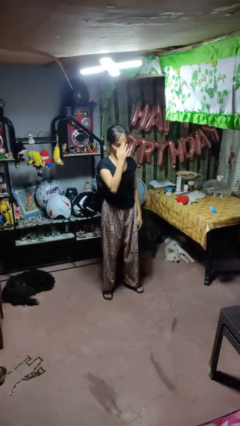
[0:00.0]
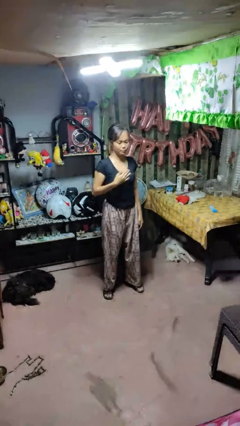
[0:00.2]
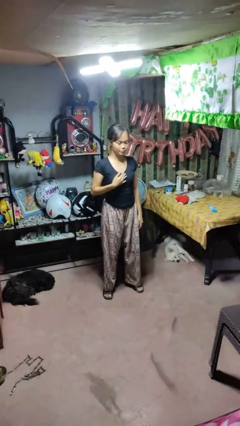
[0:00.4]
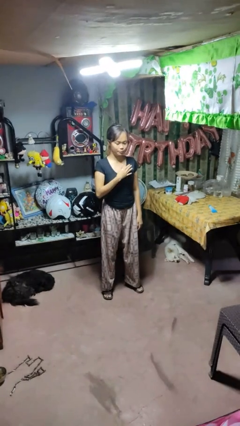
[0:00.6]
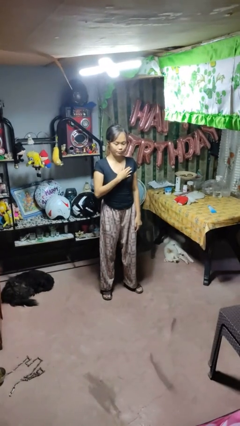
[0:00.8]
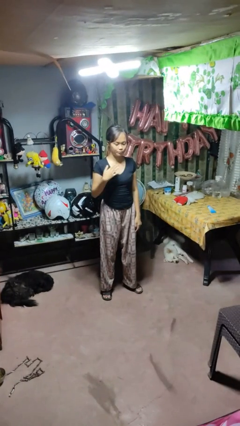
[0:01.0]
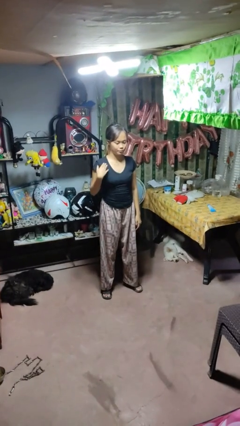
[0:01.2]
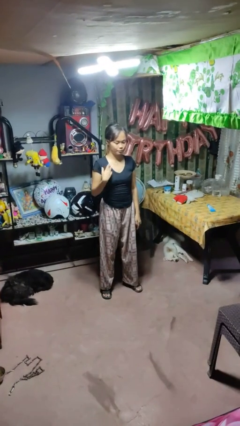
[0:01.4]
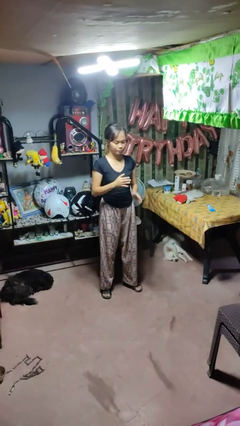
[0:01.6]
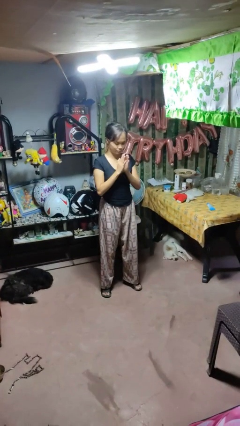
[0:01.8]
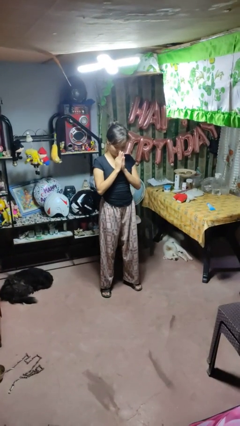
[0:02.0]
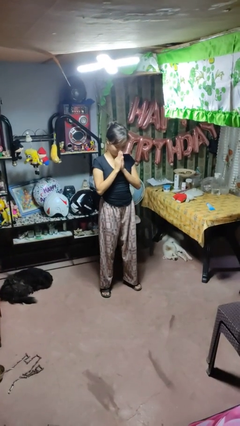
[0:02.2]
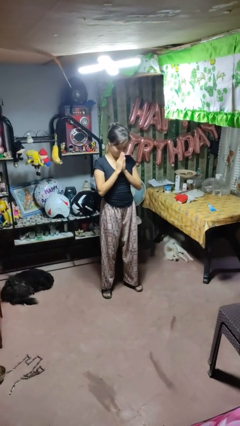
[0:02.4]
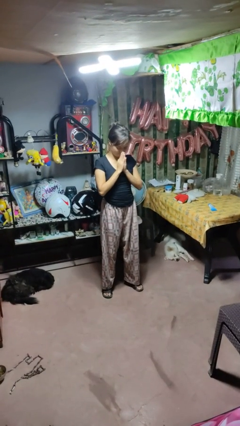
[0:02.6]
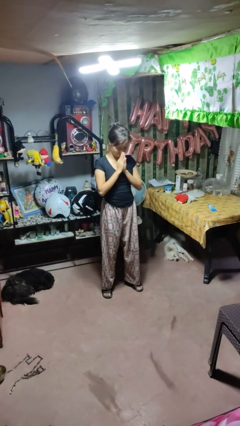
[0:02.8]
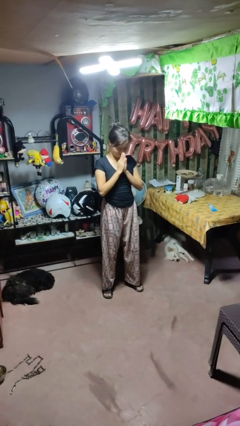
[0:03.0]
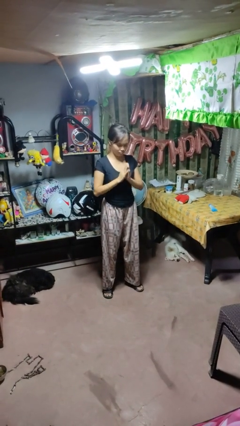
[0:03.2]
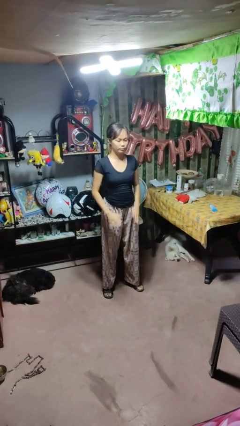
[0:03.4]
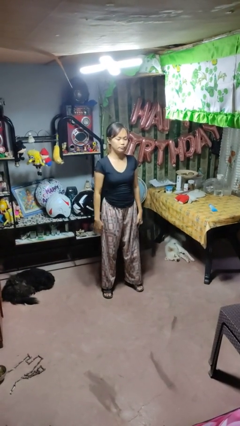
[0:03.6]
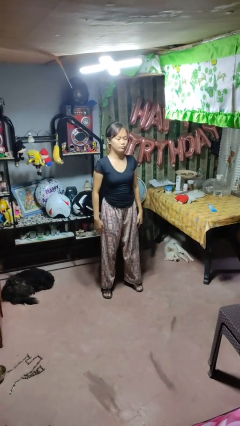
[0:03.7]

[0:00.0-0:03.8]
person prays

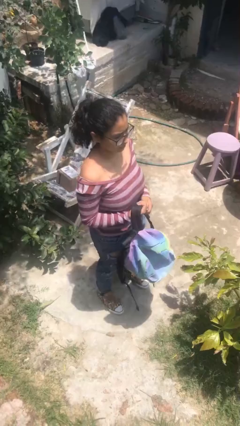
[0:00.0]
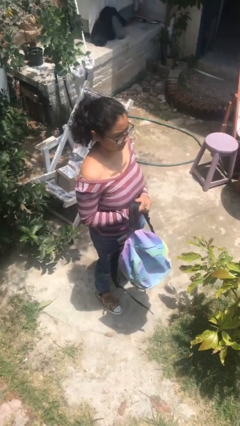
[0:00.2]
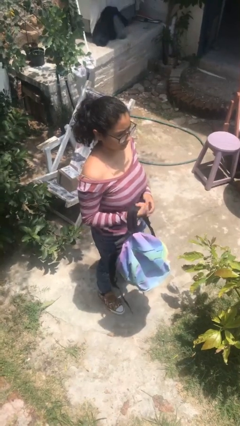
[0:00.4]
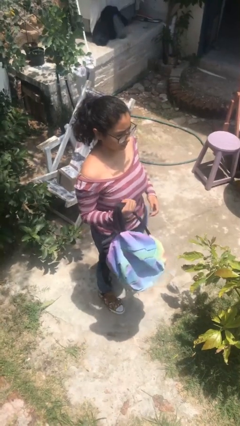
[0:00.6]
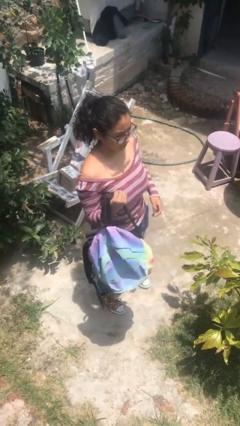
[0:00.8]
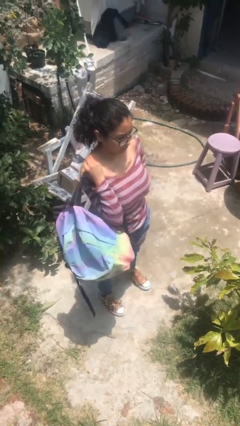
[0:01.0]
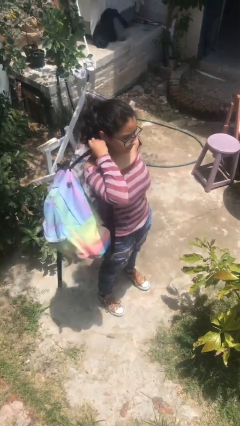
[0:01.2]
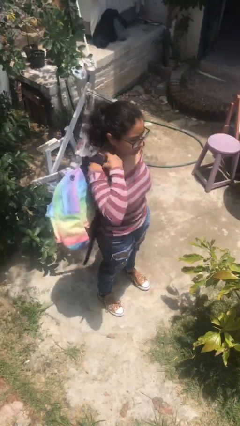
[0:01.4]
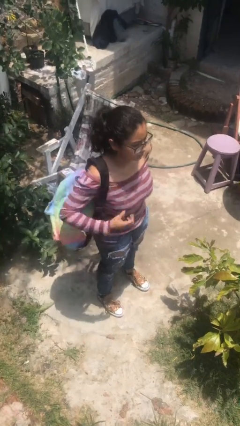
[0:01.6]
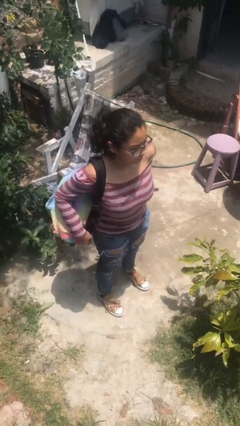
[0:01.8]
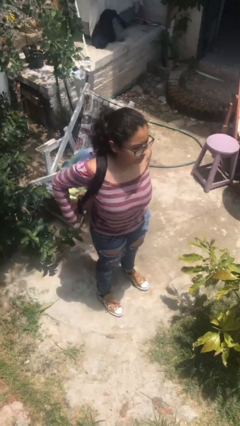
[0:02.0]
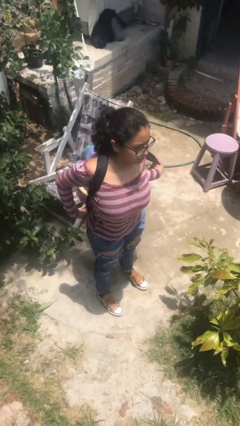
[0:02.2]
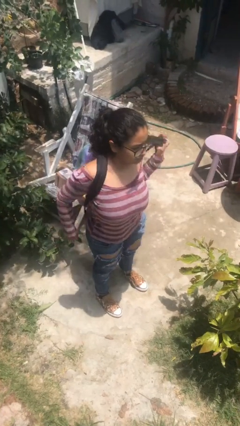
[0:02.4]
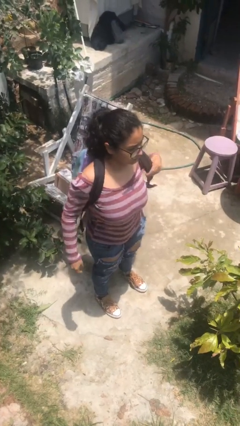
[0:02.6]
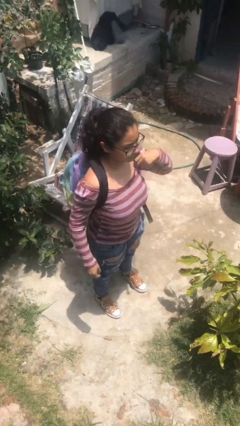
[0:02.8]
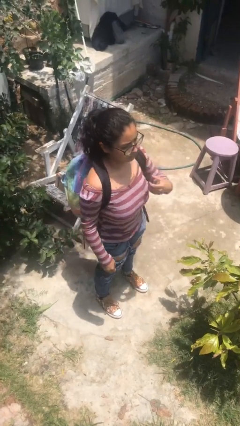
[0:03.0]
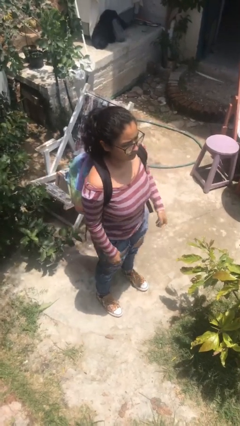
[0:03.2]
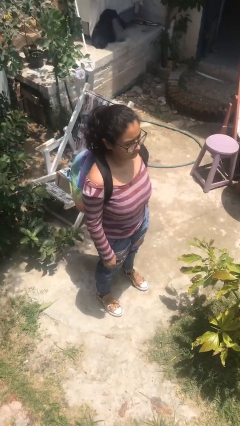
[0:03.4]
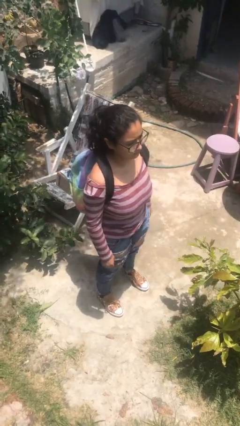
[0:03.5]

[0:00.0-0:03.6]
person puts on backpack

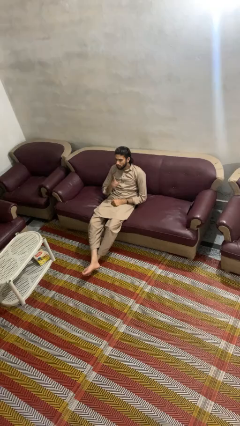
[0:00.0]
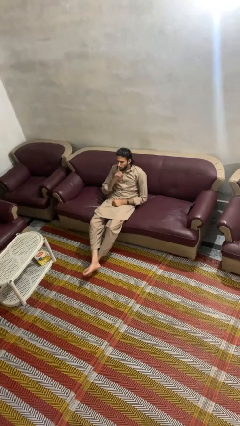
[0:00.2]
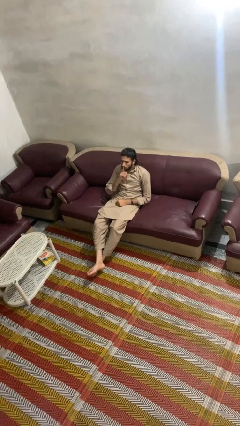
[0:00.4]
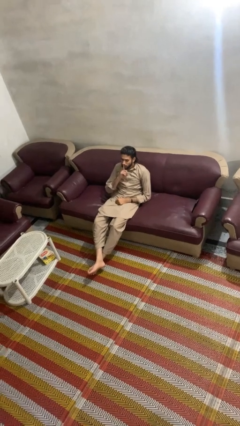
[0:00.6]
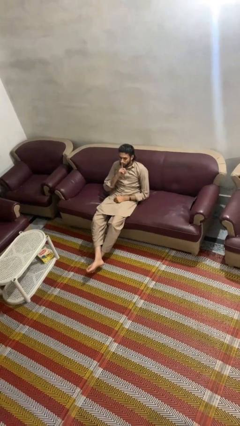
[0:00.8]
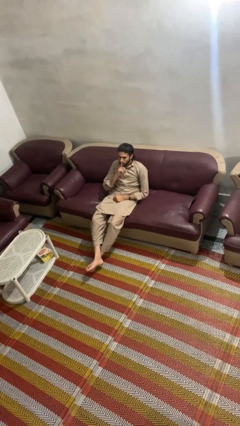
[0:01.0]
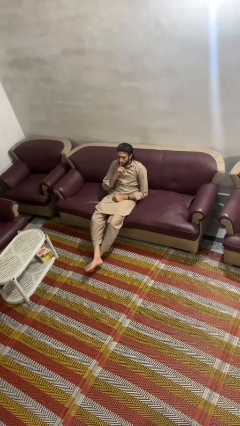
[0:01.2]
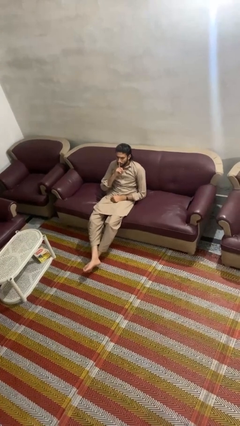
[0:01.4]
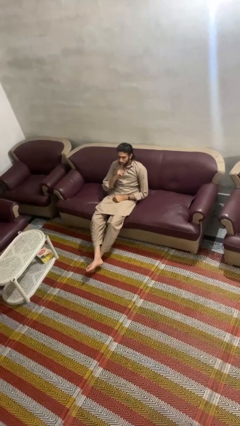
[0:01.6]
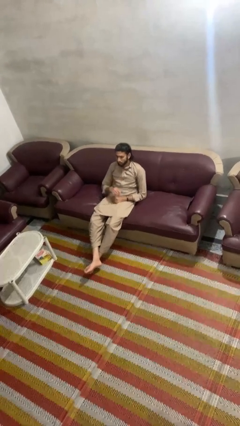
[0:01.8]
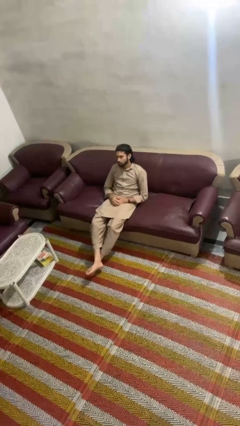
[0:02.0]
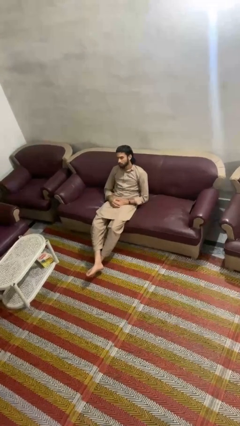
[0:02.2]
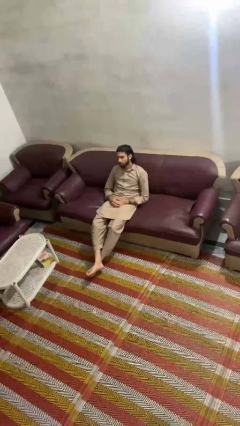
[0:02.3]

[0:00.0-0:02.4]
person gestures be quiet

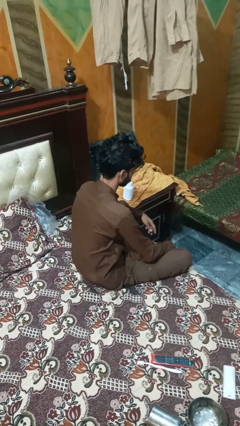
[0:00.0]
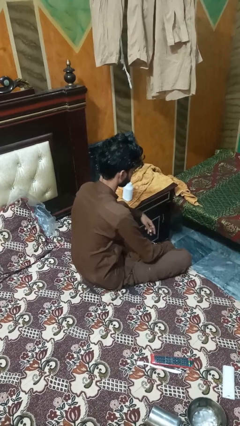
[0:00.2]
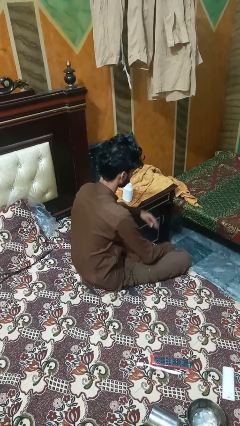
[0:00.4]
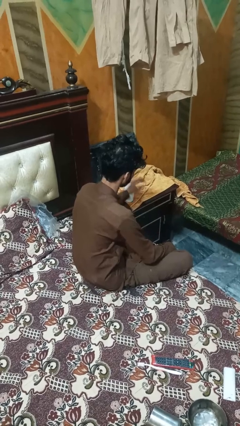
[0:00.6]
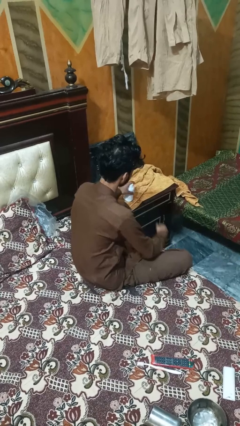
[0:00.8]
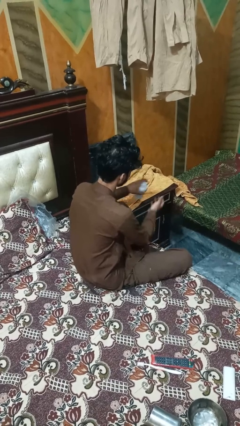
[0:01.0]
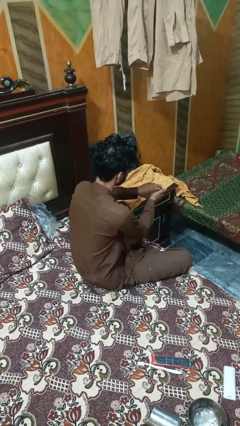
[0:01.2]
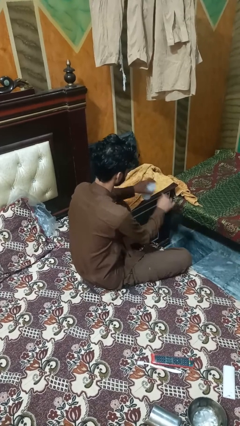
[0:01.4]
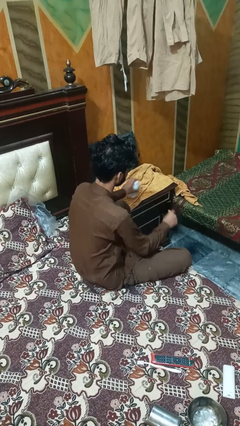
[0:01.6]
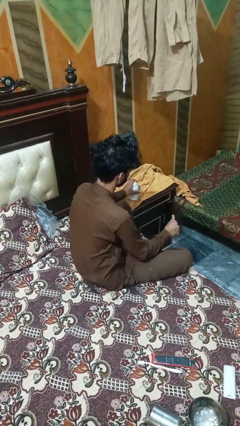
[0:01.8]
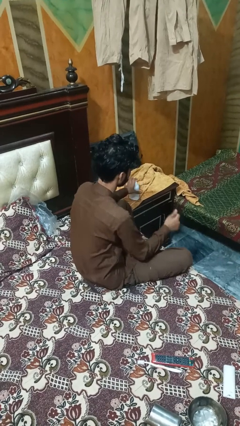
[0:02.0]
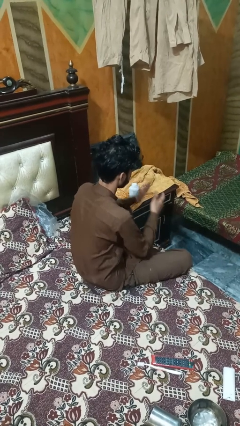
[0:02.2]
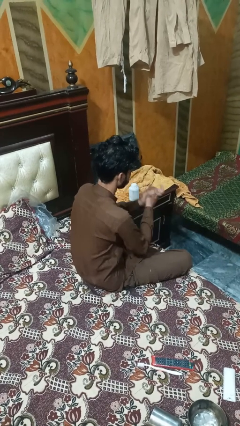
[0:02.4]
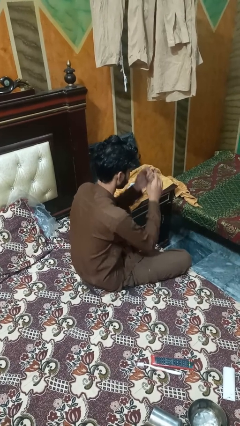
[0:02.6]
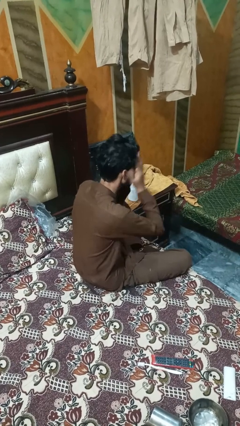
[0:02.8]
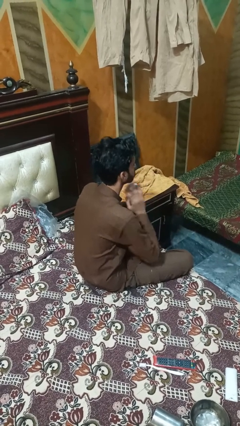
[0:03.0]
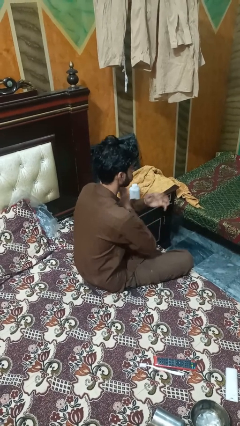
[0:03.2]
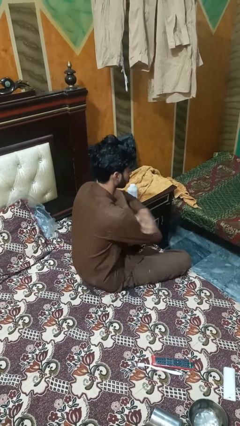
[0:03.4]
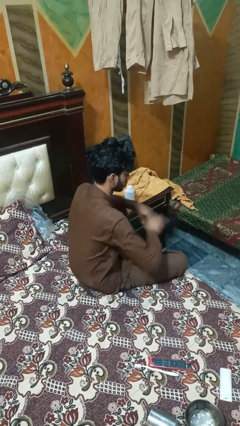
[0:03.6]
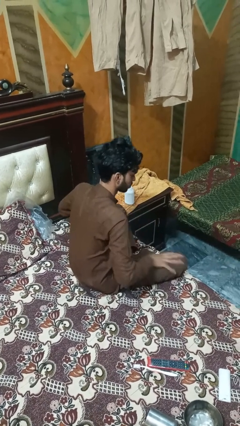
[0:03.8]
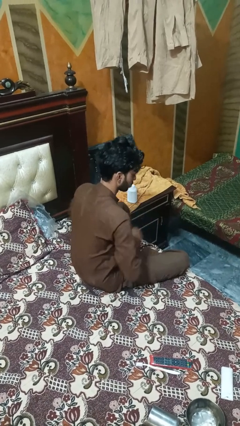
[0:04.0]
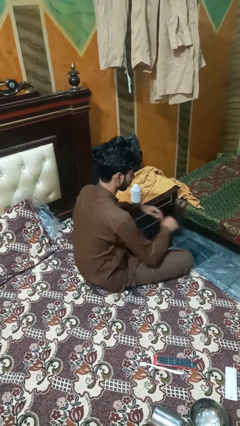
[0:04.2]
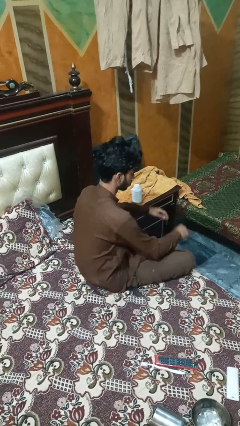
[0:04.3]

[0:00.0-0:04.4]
person applies sunscreen

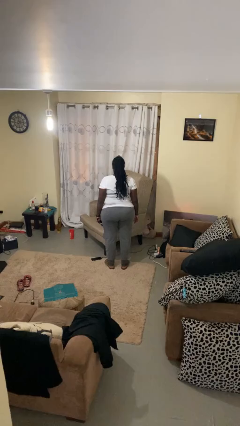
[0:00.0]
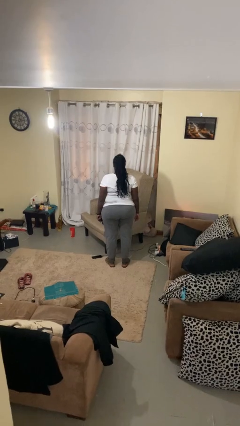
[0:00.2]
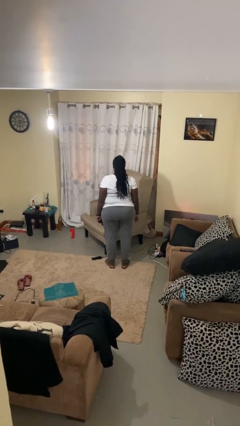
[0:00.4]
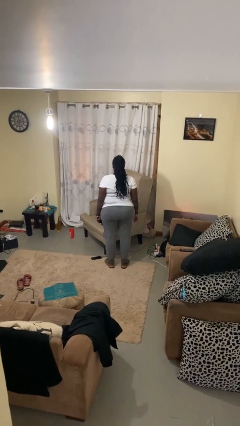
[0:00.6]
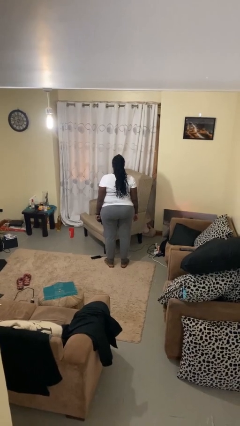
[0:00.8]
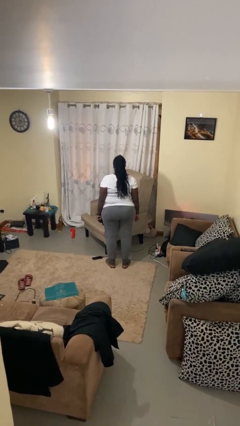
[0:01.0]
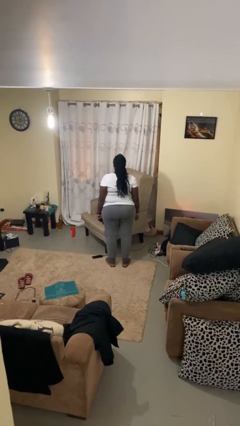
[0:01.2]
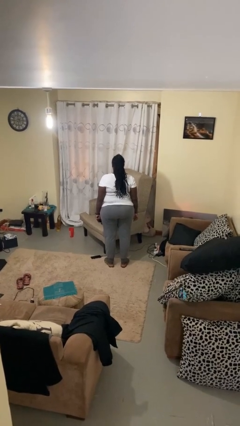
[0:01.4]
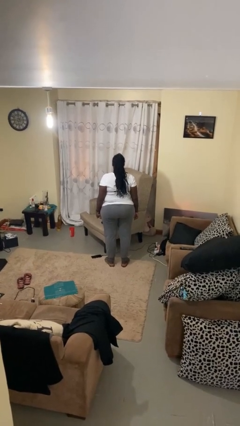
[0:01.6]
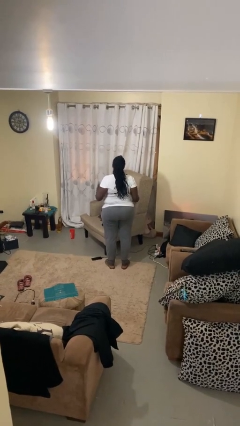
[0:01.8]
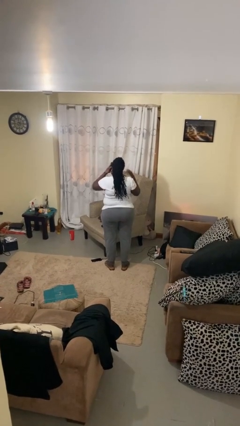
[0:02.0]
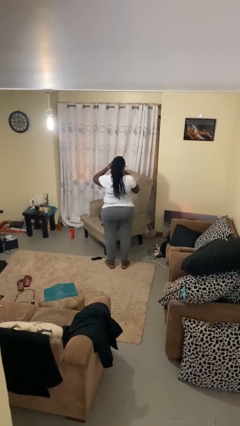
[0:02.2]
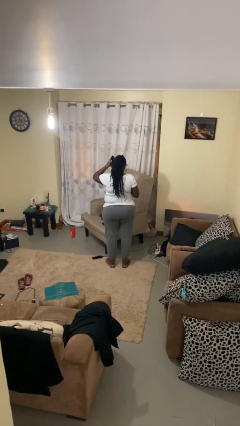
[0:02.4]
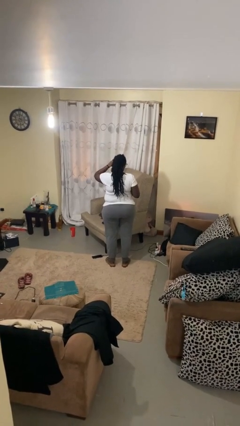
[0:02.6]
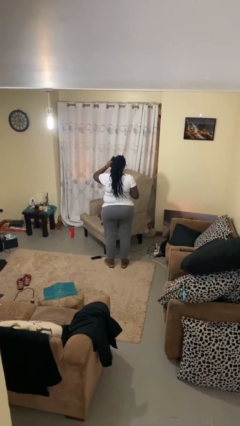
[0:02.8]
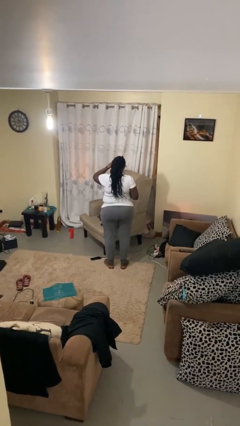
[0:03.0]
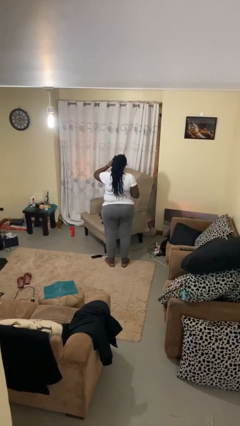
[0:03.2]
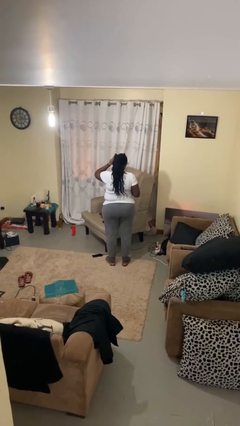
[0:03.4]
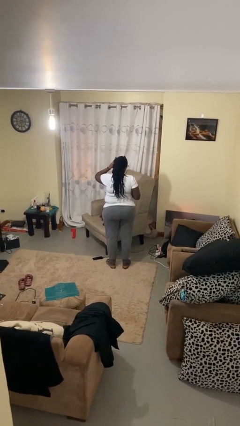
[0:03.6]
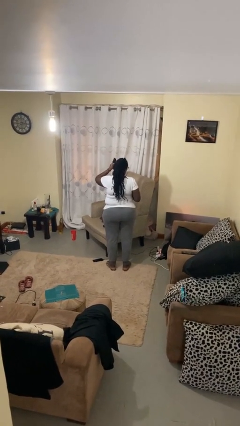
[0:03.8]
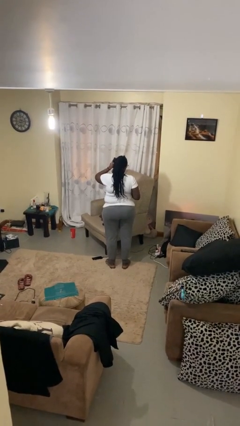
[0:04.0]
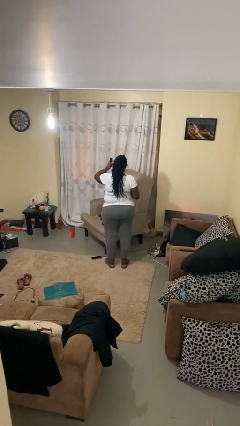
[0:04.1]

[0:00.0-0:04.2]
person brushes hair
